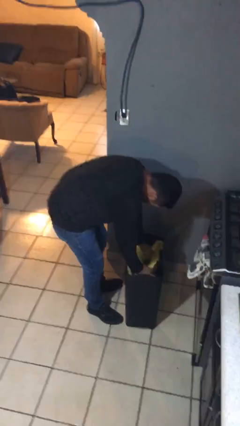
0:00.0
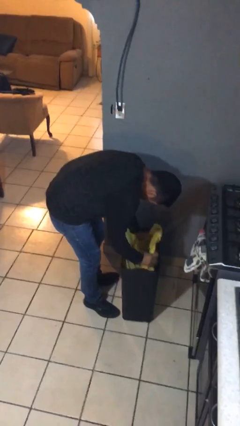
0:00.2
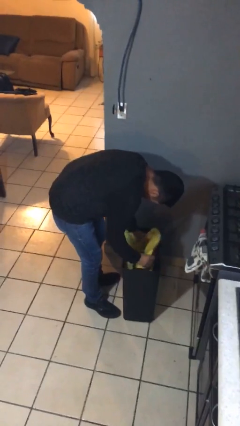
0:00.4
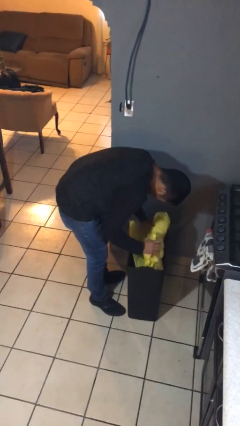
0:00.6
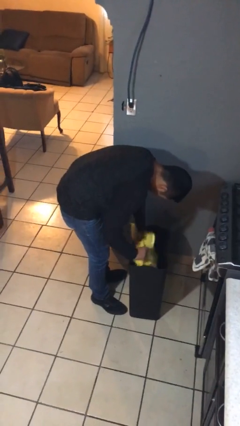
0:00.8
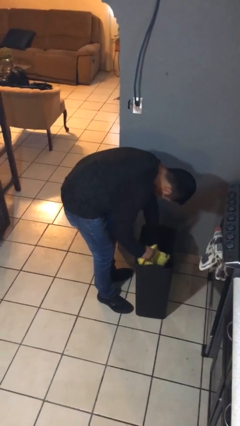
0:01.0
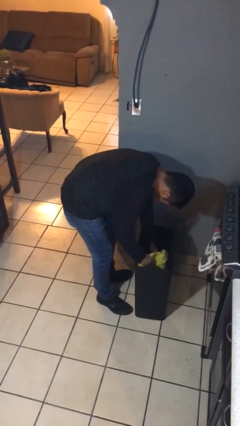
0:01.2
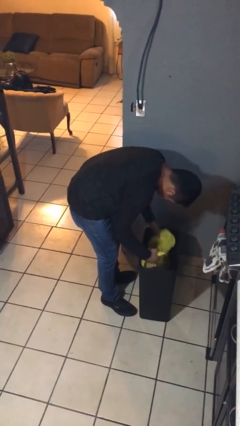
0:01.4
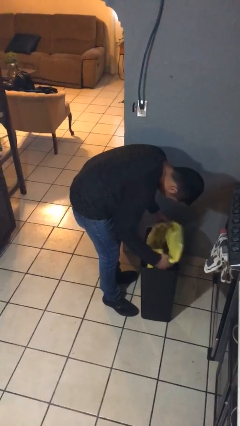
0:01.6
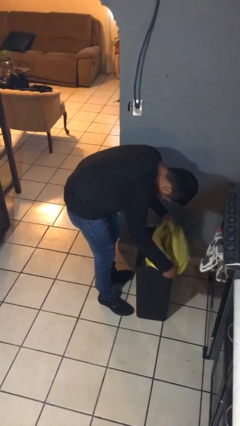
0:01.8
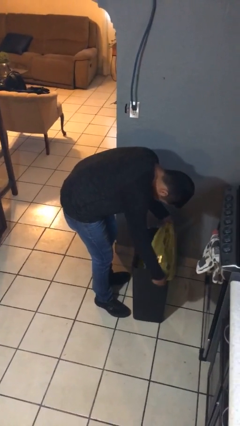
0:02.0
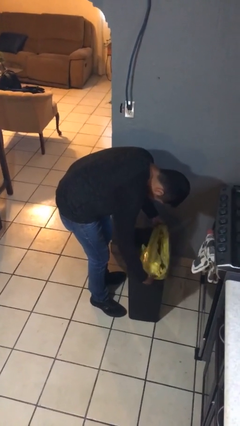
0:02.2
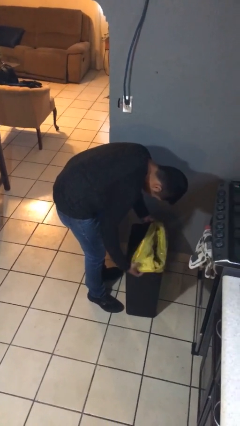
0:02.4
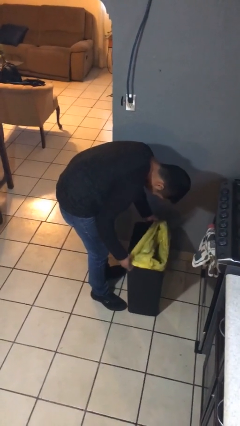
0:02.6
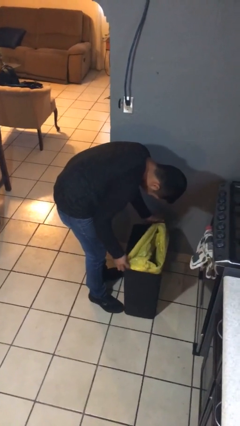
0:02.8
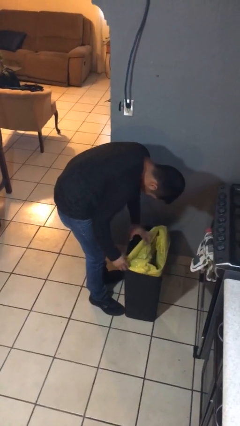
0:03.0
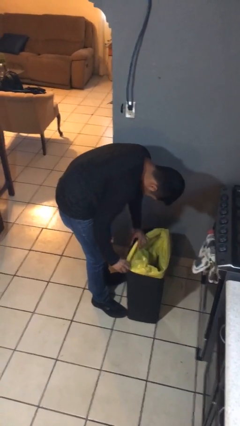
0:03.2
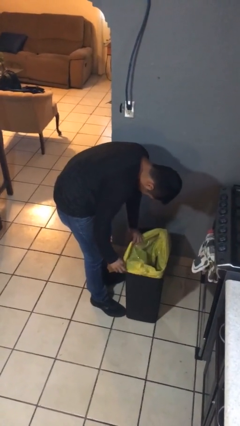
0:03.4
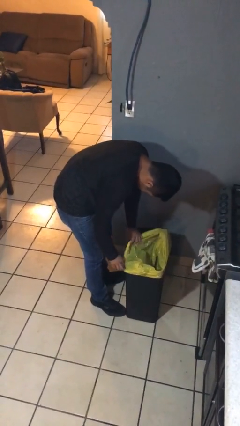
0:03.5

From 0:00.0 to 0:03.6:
person inserts trashbag into trashcan

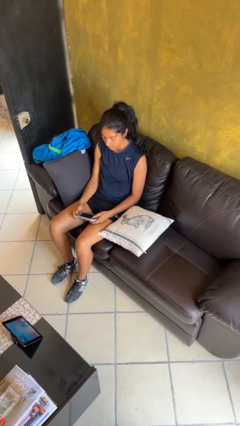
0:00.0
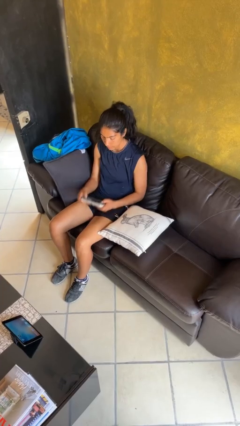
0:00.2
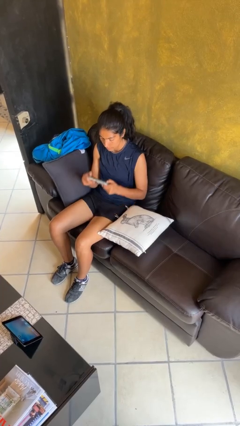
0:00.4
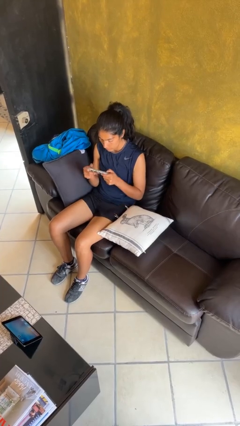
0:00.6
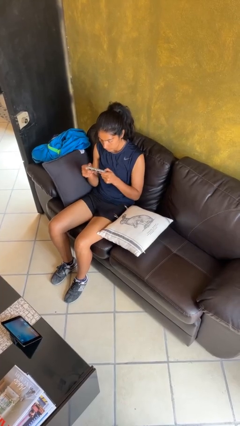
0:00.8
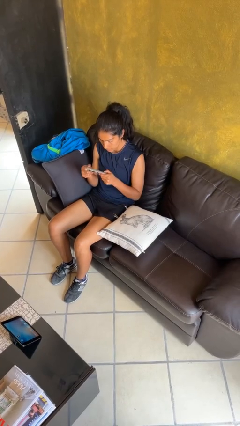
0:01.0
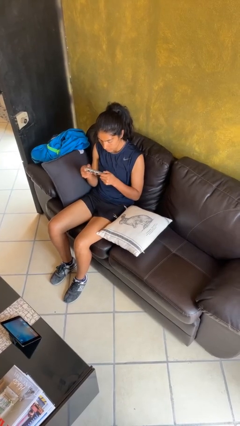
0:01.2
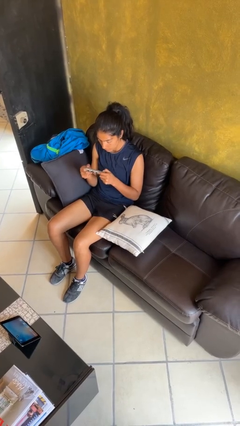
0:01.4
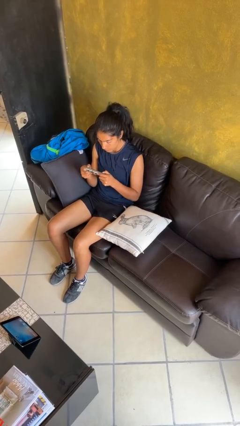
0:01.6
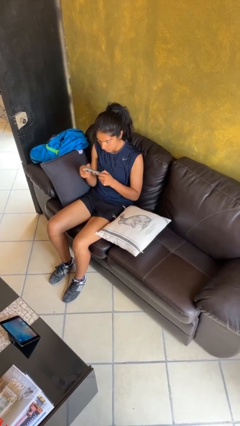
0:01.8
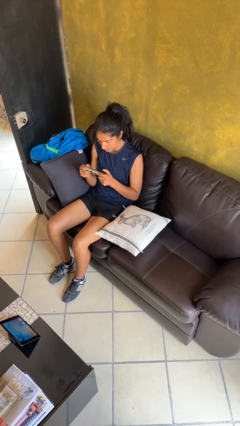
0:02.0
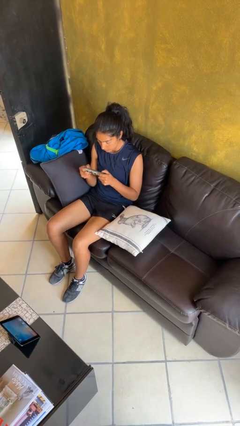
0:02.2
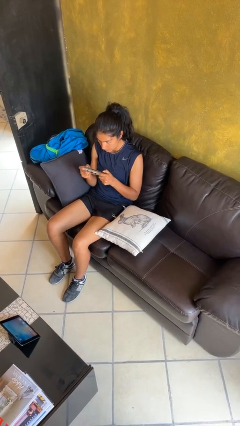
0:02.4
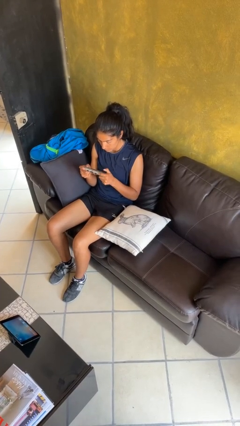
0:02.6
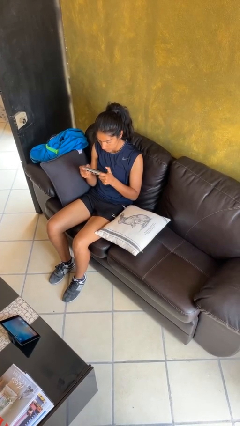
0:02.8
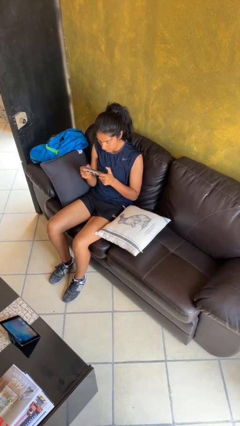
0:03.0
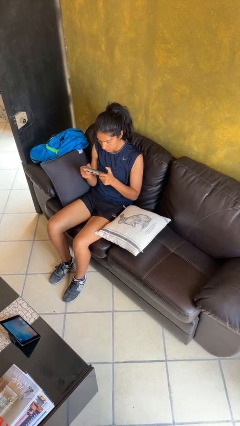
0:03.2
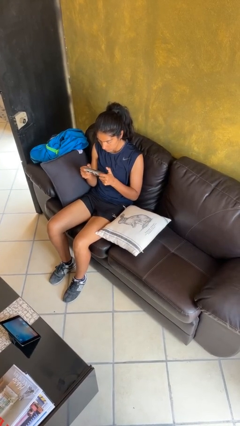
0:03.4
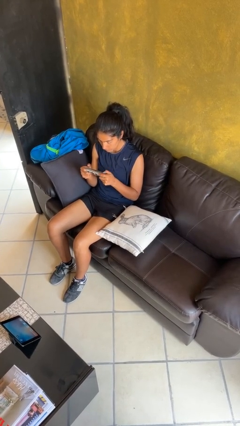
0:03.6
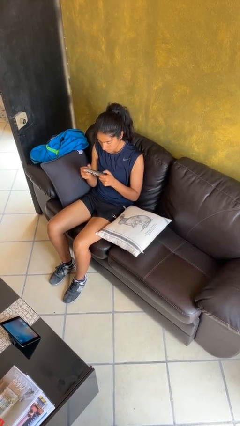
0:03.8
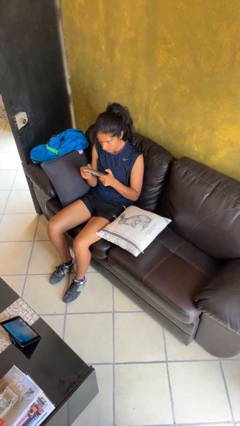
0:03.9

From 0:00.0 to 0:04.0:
person interacts with handheld game

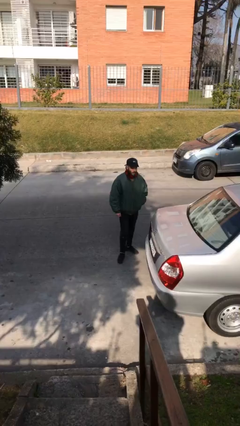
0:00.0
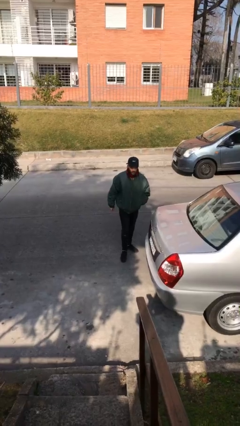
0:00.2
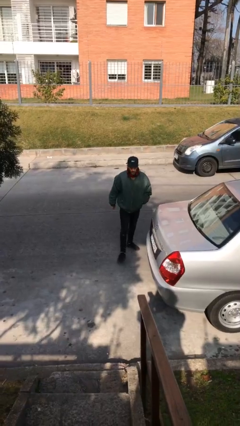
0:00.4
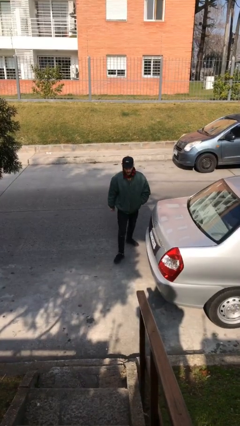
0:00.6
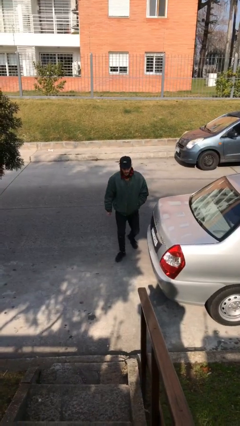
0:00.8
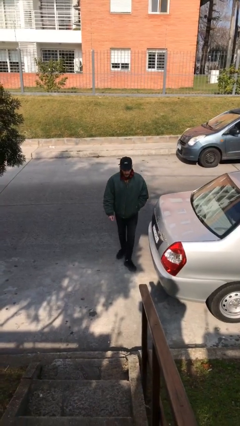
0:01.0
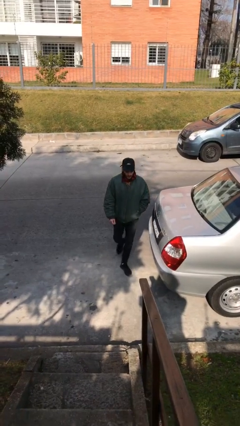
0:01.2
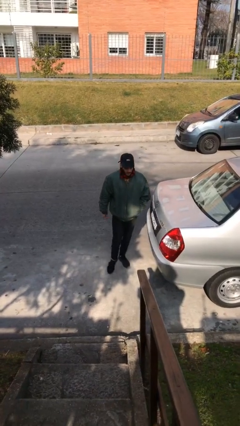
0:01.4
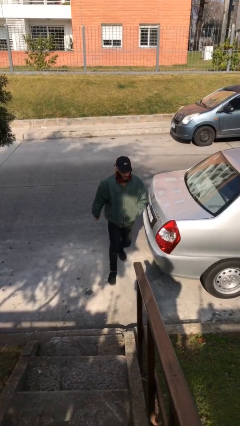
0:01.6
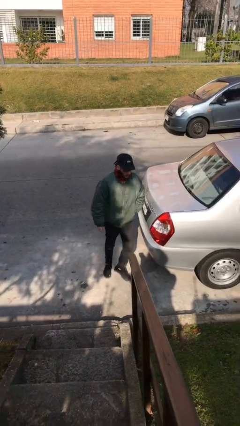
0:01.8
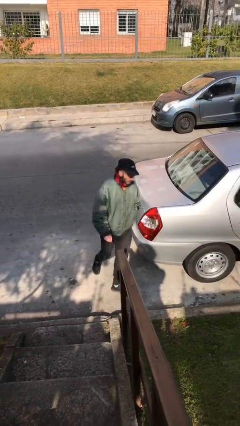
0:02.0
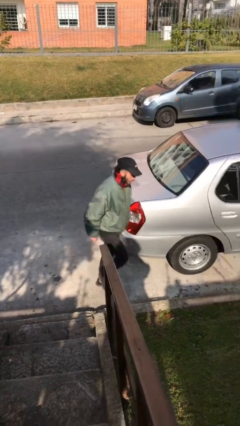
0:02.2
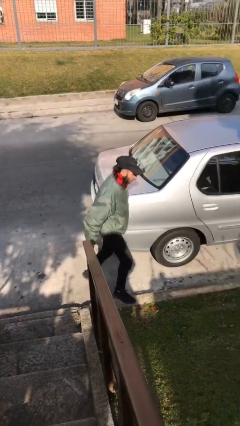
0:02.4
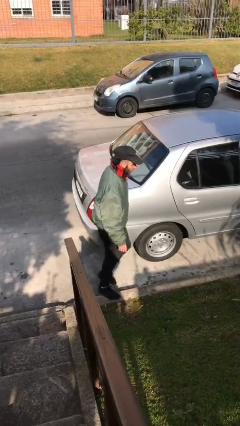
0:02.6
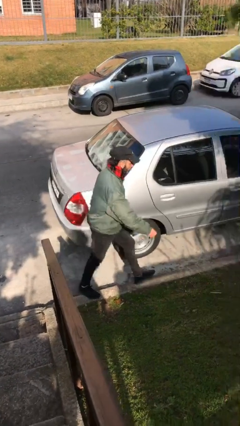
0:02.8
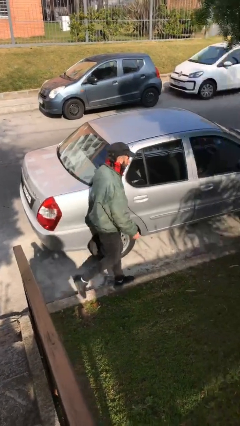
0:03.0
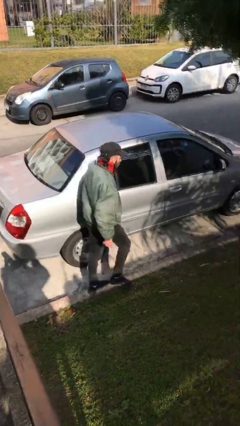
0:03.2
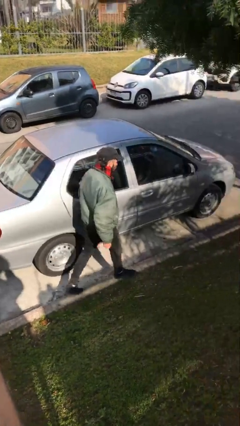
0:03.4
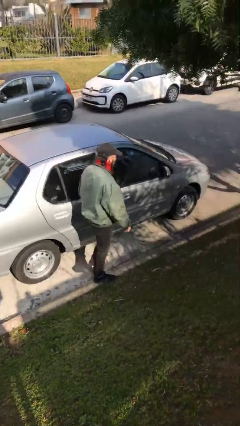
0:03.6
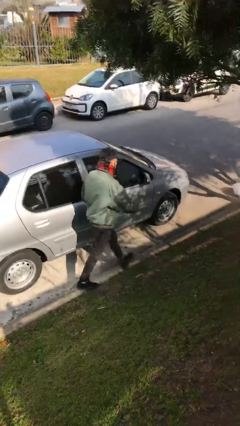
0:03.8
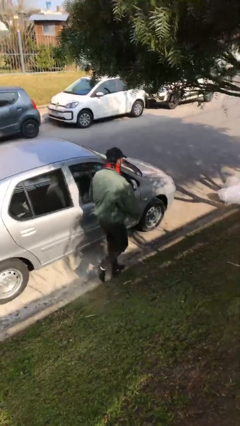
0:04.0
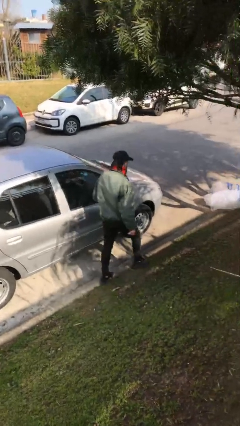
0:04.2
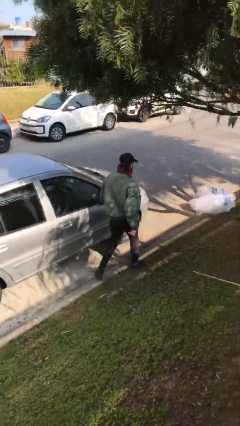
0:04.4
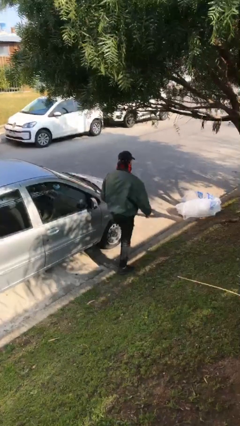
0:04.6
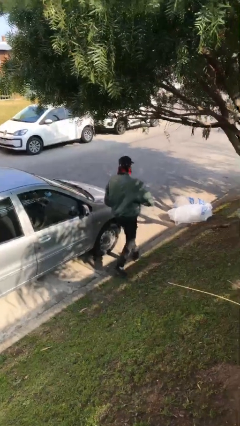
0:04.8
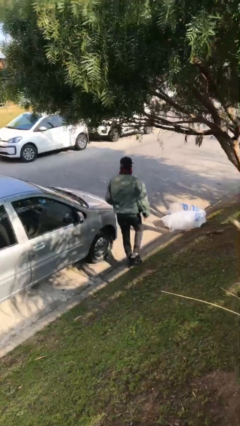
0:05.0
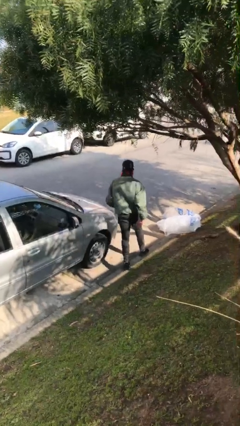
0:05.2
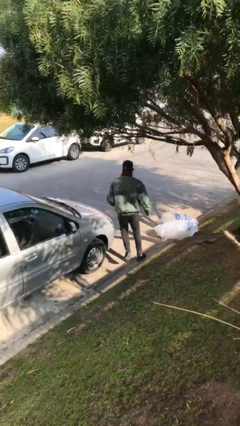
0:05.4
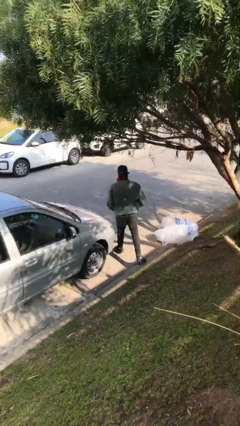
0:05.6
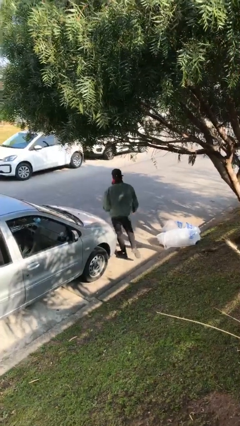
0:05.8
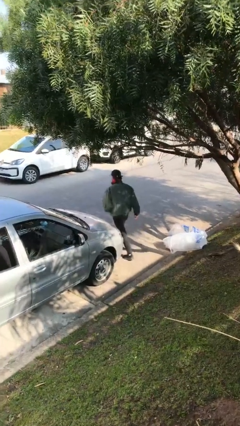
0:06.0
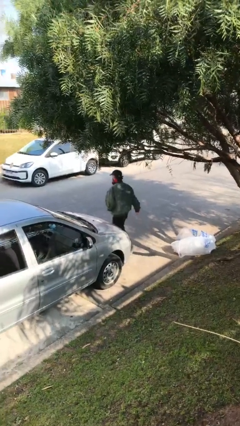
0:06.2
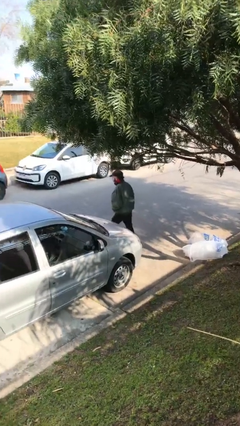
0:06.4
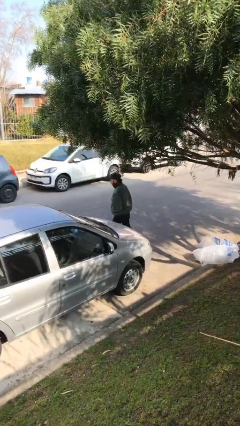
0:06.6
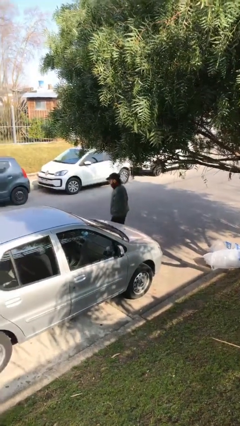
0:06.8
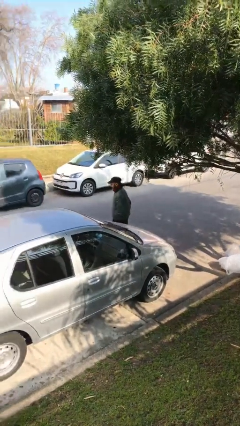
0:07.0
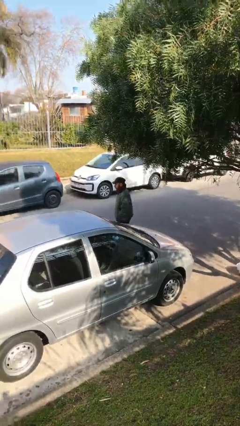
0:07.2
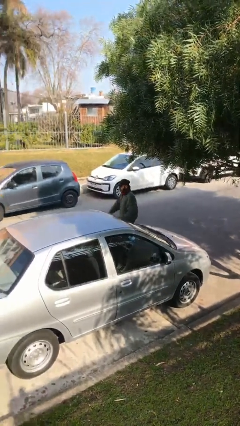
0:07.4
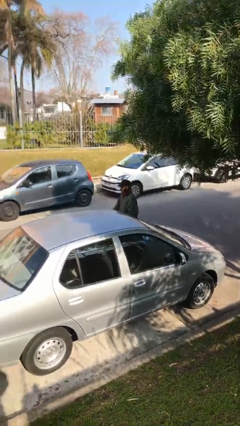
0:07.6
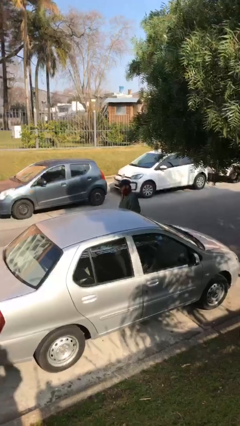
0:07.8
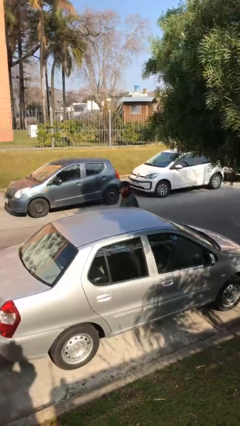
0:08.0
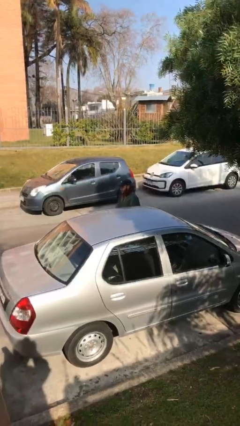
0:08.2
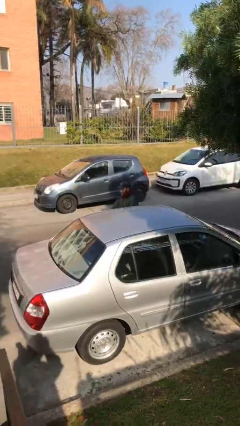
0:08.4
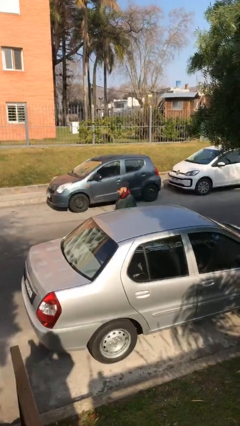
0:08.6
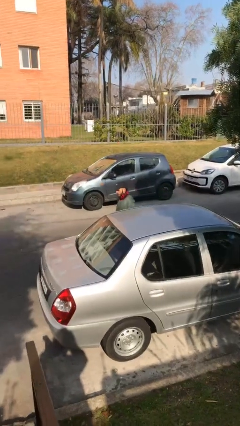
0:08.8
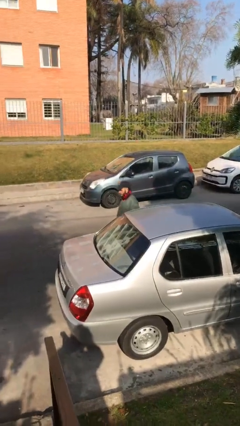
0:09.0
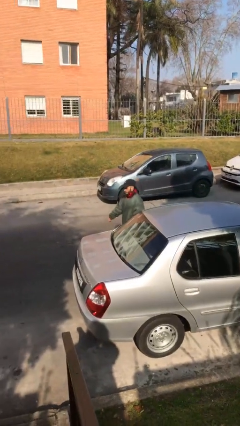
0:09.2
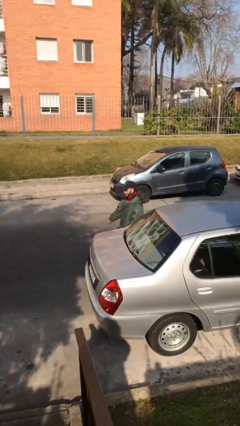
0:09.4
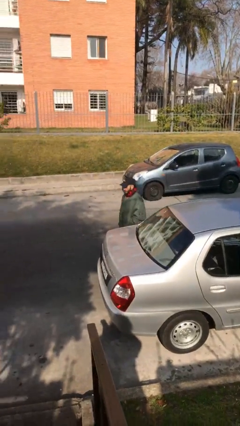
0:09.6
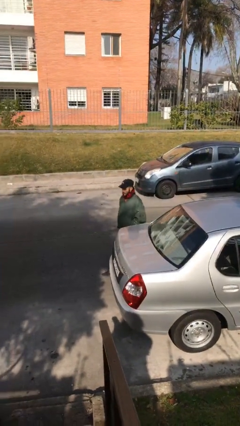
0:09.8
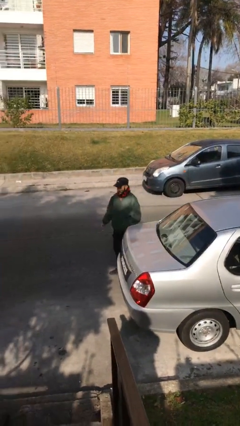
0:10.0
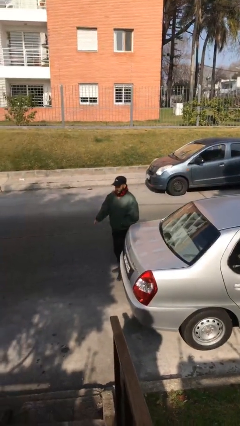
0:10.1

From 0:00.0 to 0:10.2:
person walks around car

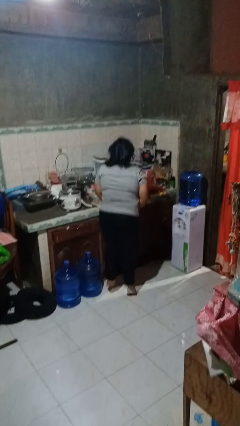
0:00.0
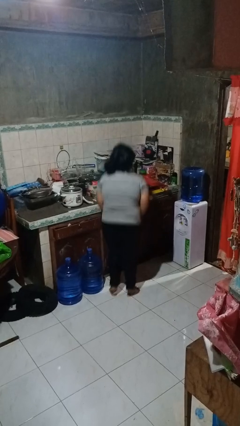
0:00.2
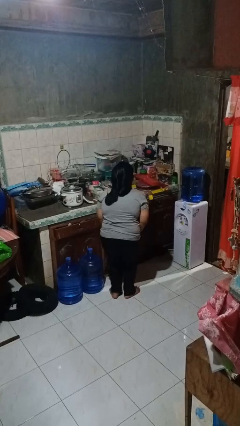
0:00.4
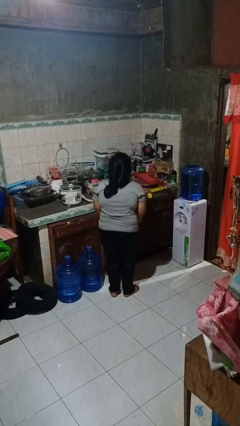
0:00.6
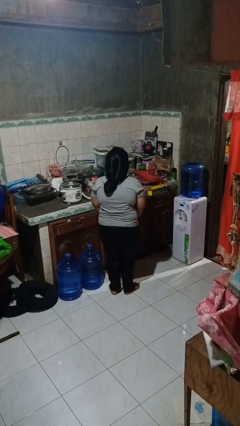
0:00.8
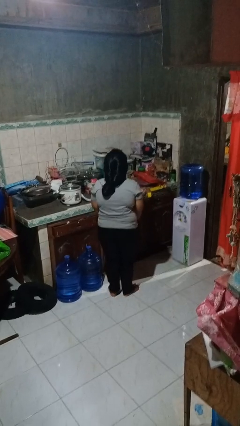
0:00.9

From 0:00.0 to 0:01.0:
person jumps
